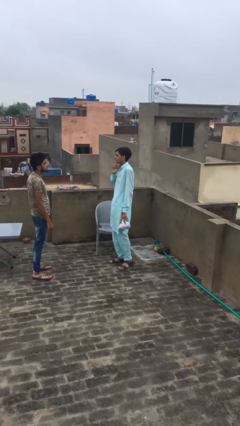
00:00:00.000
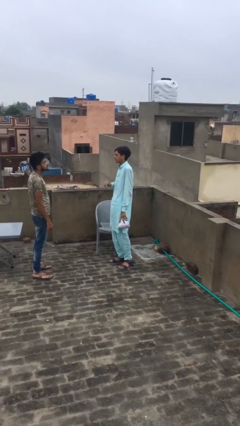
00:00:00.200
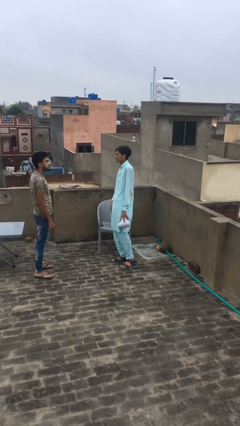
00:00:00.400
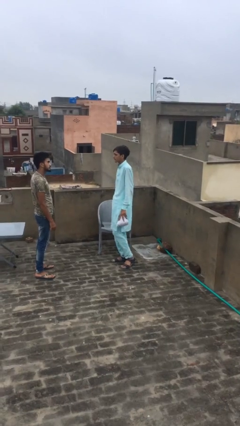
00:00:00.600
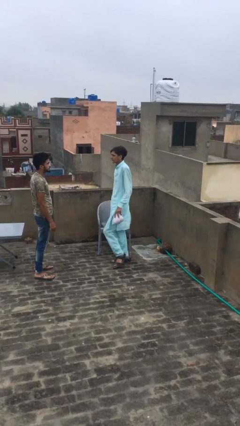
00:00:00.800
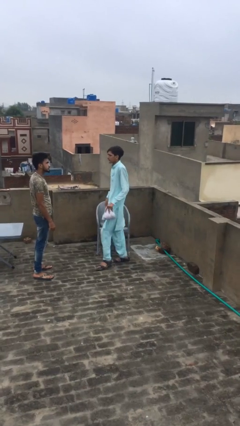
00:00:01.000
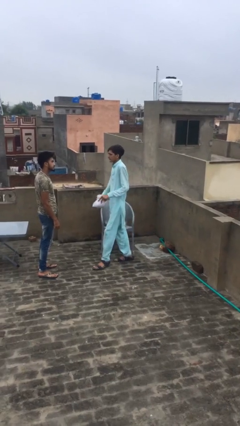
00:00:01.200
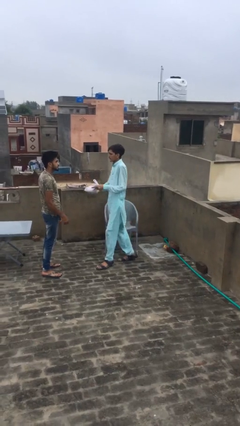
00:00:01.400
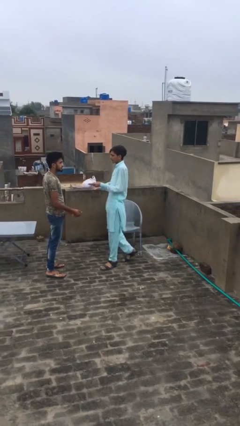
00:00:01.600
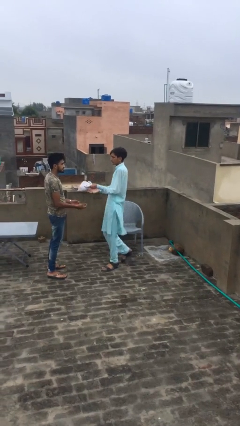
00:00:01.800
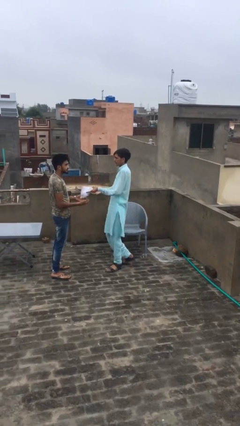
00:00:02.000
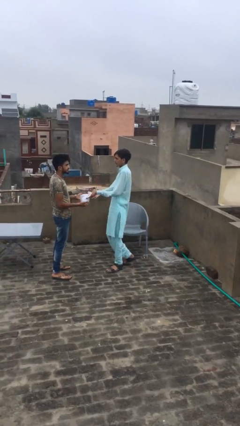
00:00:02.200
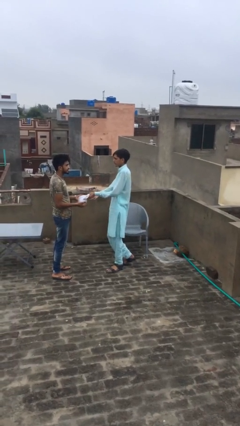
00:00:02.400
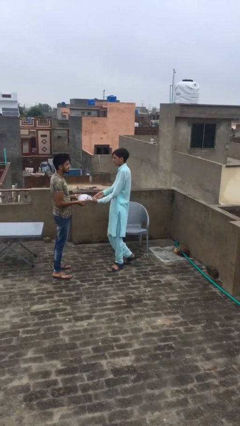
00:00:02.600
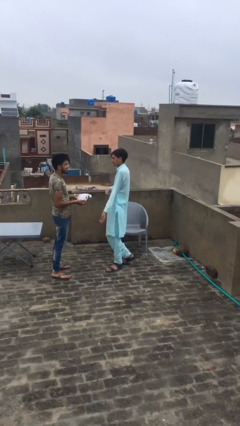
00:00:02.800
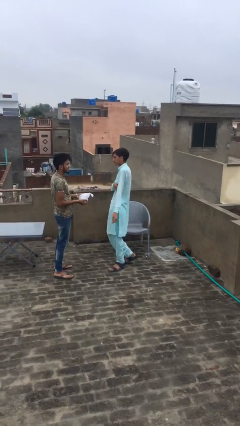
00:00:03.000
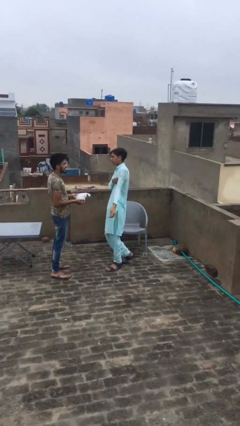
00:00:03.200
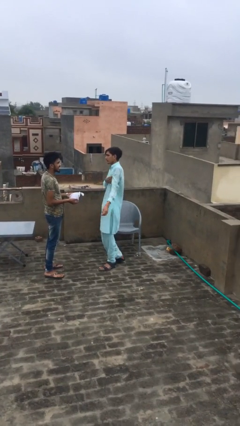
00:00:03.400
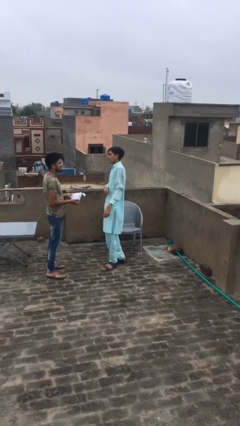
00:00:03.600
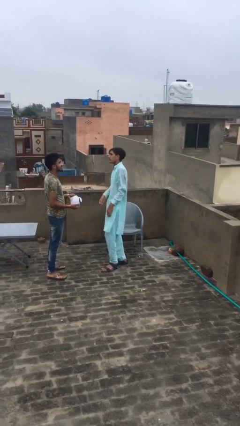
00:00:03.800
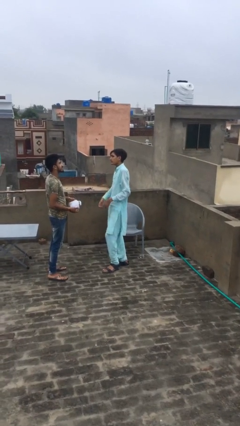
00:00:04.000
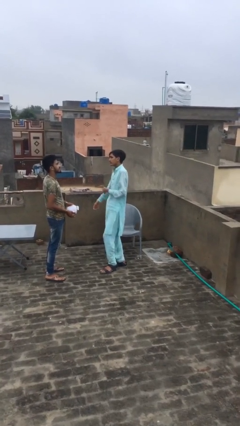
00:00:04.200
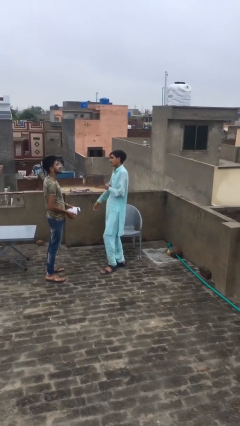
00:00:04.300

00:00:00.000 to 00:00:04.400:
person transfers object to person

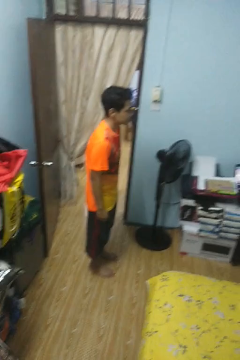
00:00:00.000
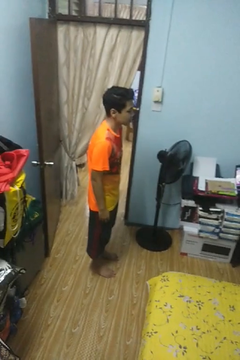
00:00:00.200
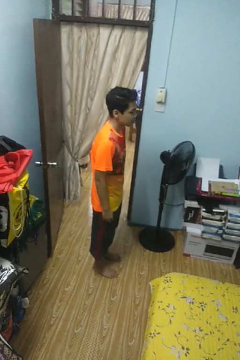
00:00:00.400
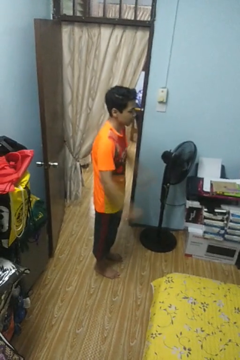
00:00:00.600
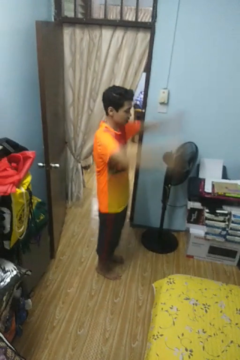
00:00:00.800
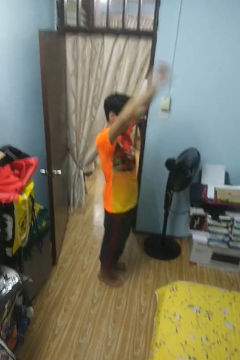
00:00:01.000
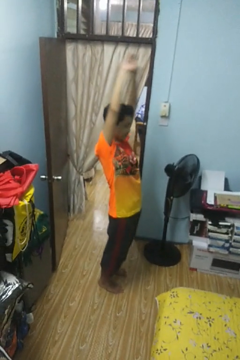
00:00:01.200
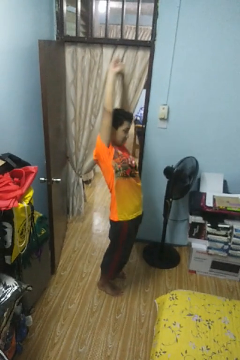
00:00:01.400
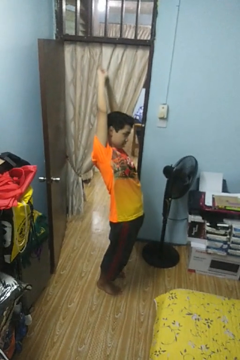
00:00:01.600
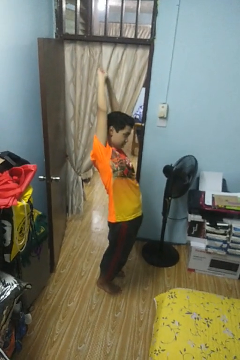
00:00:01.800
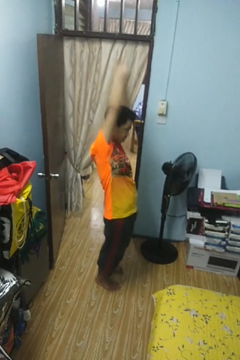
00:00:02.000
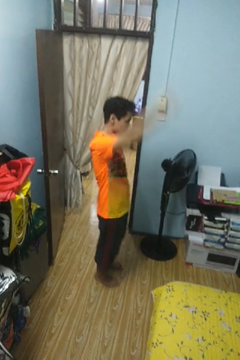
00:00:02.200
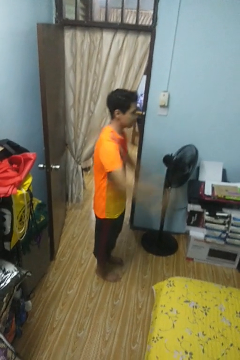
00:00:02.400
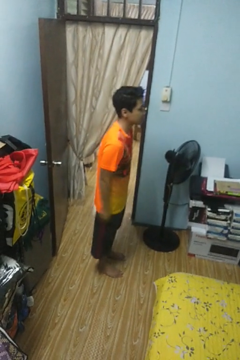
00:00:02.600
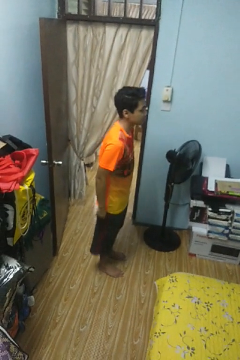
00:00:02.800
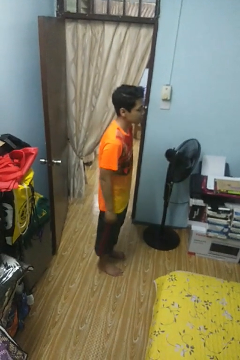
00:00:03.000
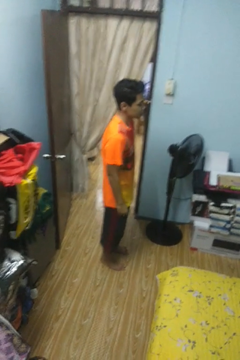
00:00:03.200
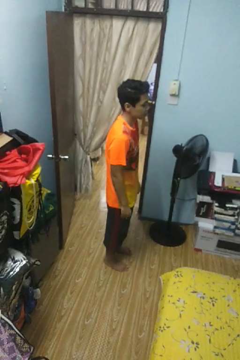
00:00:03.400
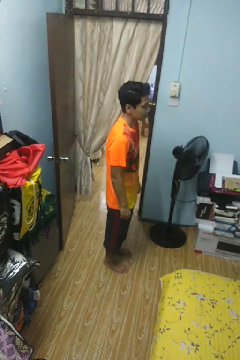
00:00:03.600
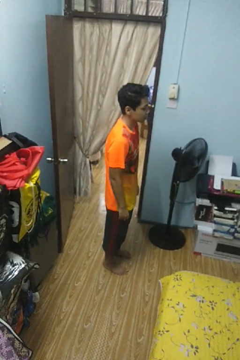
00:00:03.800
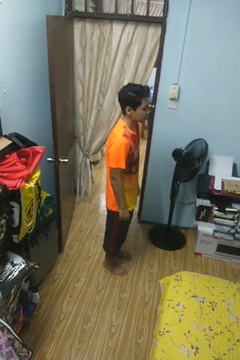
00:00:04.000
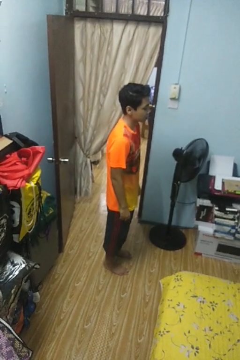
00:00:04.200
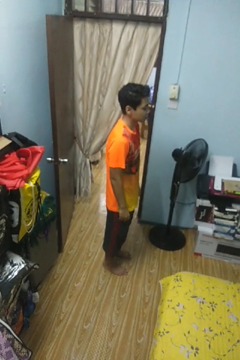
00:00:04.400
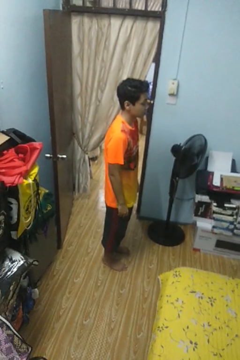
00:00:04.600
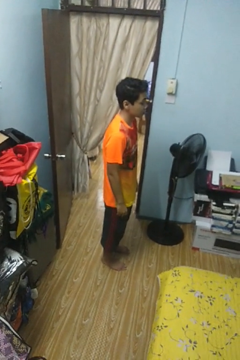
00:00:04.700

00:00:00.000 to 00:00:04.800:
person stretches arms over head

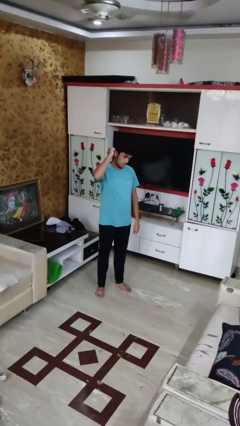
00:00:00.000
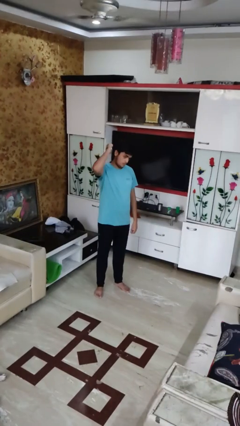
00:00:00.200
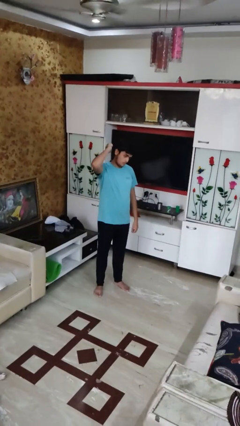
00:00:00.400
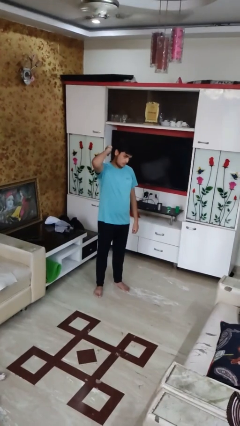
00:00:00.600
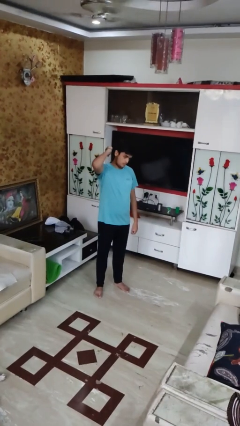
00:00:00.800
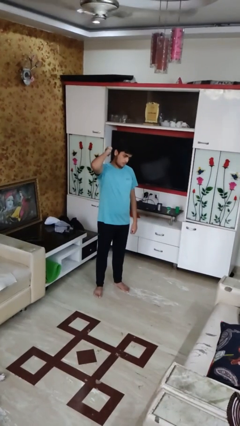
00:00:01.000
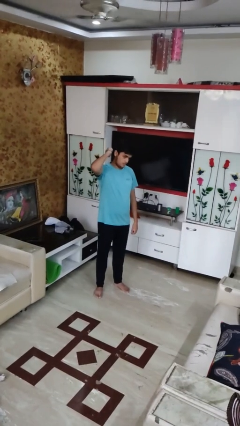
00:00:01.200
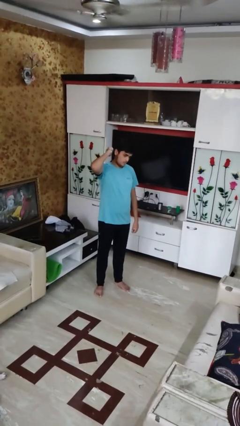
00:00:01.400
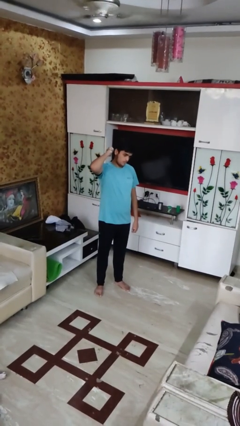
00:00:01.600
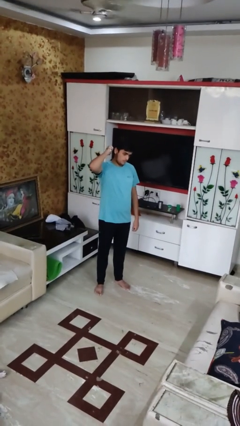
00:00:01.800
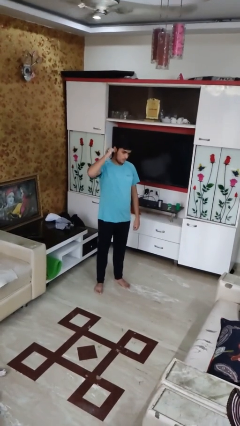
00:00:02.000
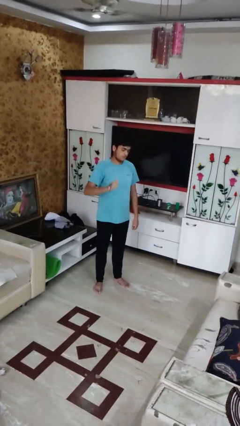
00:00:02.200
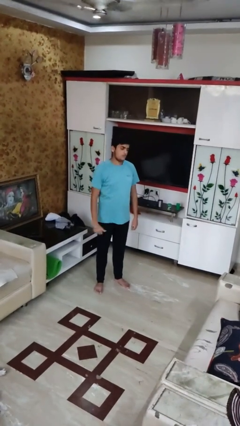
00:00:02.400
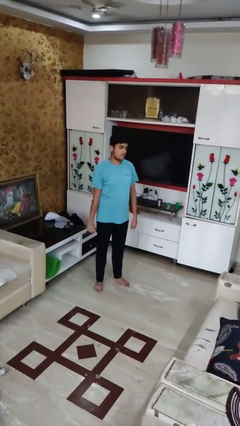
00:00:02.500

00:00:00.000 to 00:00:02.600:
person gestures behind me

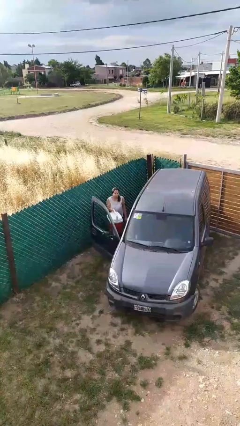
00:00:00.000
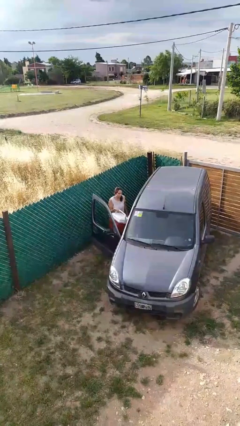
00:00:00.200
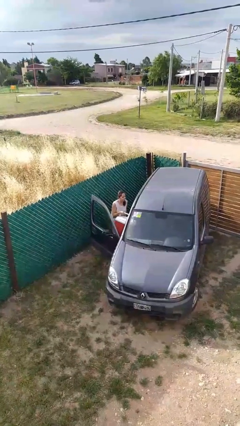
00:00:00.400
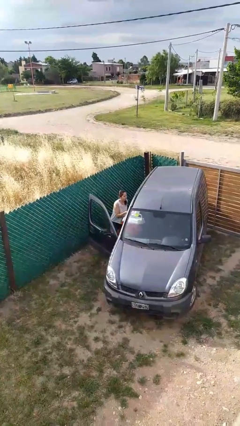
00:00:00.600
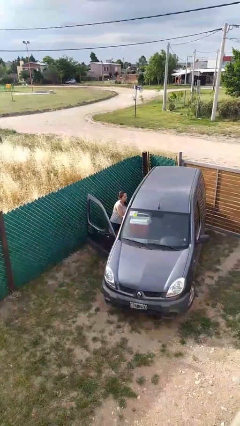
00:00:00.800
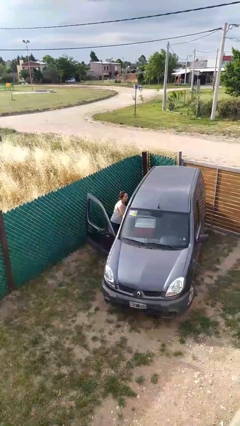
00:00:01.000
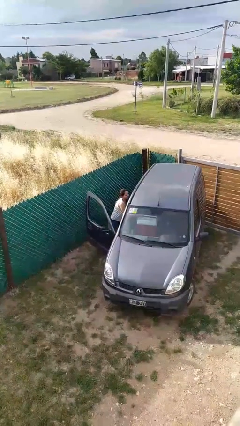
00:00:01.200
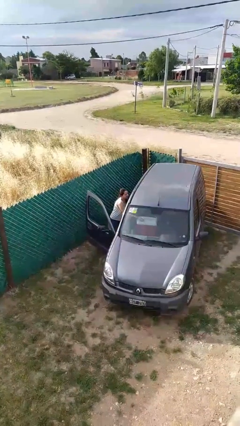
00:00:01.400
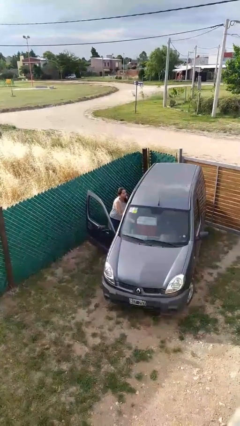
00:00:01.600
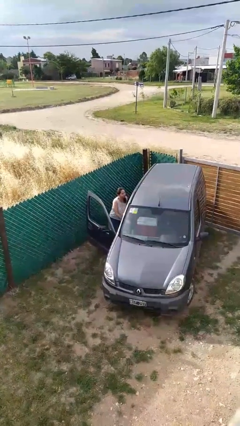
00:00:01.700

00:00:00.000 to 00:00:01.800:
person loads car

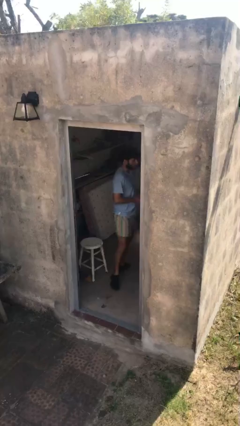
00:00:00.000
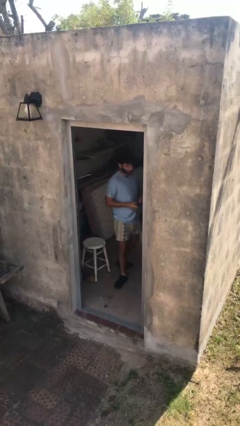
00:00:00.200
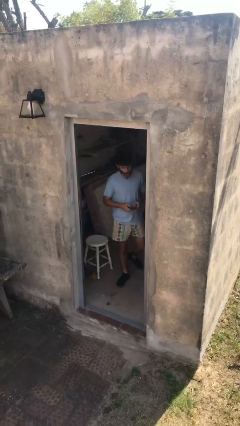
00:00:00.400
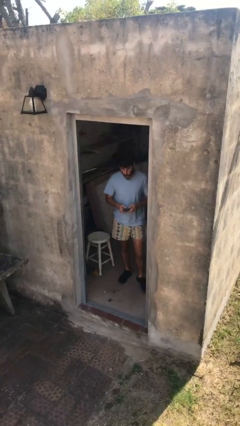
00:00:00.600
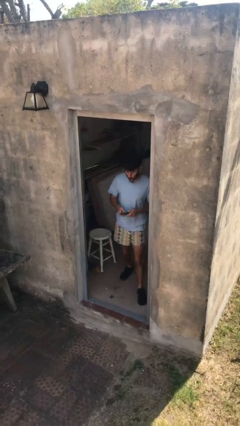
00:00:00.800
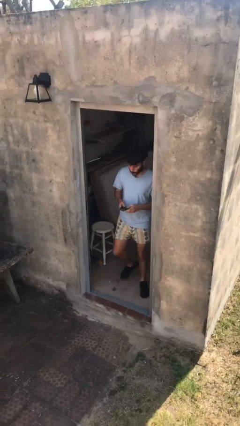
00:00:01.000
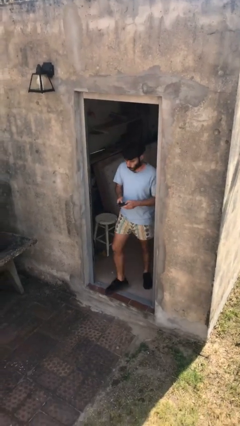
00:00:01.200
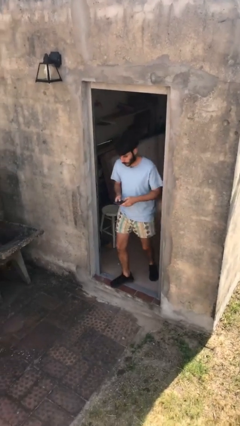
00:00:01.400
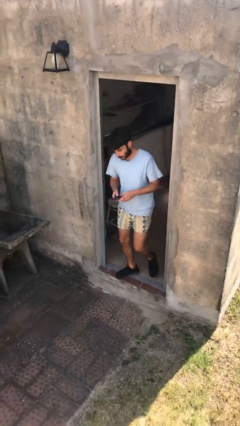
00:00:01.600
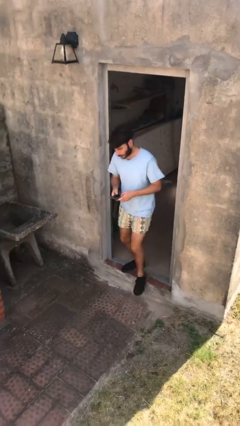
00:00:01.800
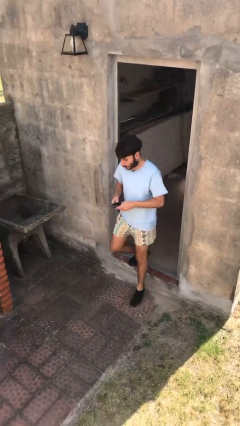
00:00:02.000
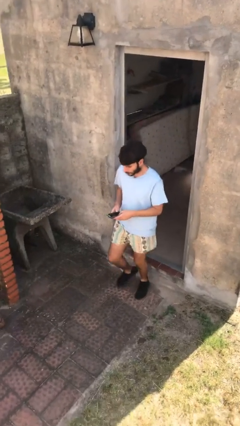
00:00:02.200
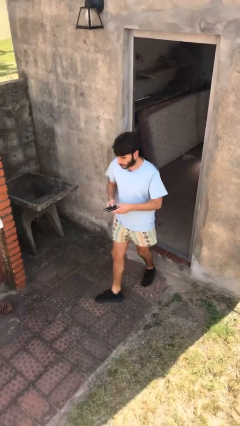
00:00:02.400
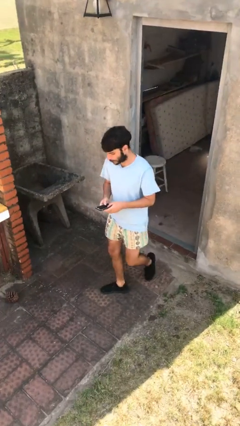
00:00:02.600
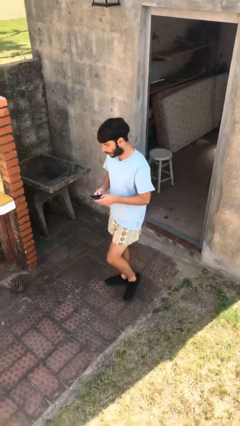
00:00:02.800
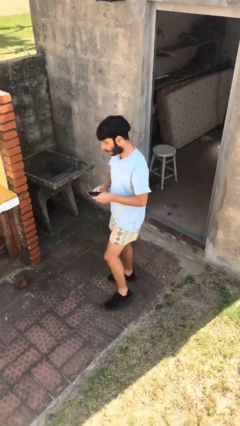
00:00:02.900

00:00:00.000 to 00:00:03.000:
person enters scene through structure

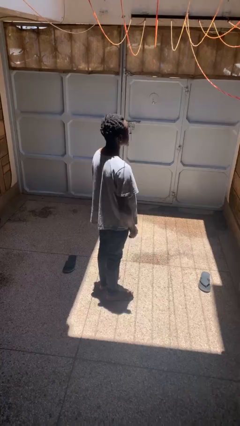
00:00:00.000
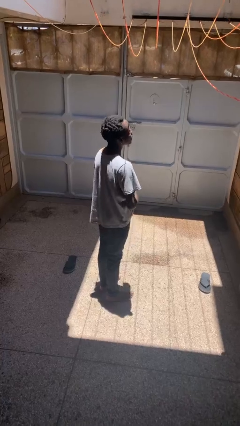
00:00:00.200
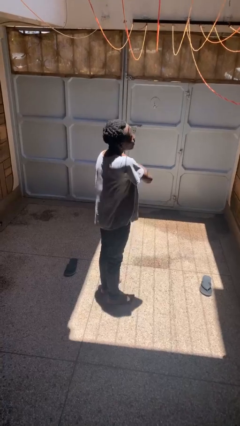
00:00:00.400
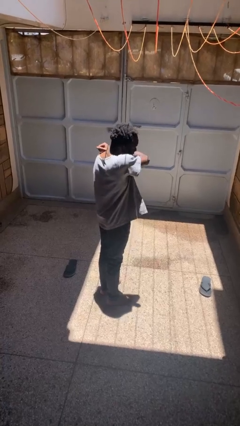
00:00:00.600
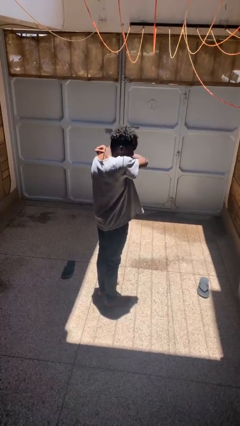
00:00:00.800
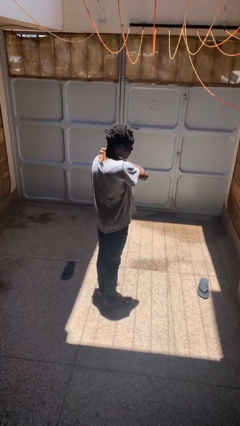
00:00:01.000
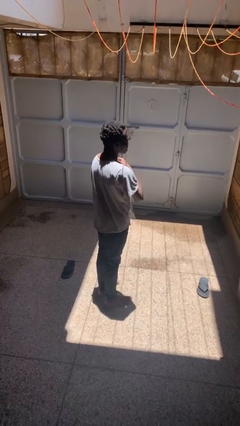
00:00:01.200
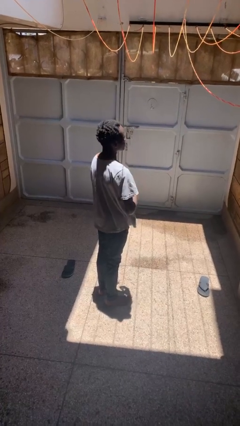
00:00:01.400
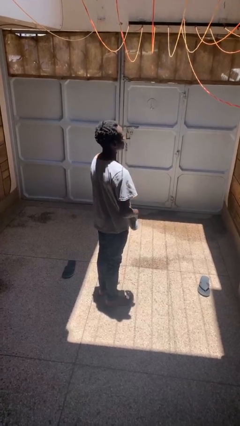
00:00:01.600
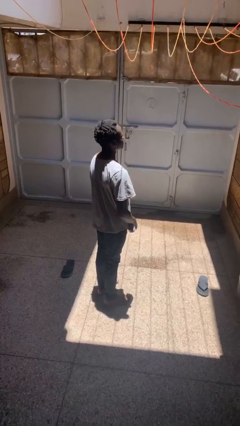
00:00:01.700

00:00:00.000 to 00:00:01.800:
person sneezes into arm
